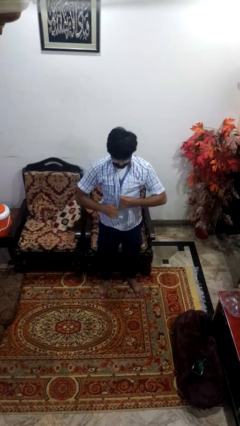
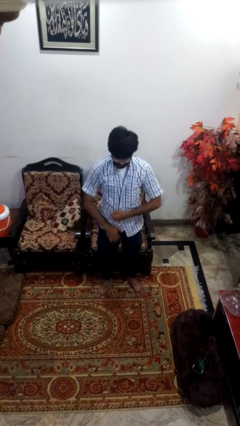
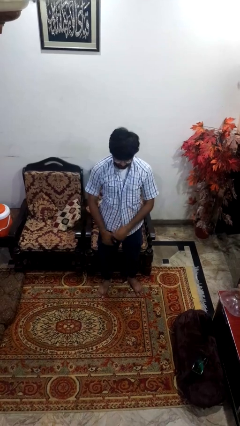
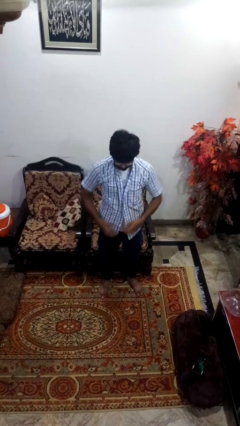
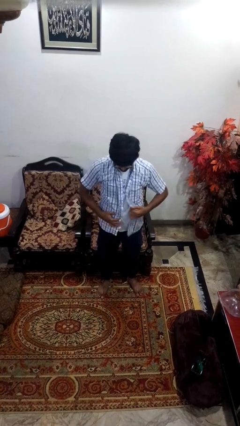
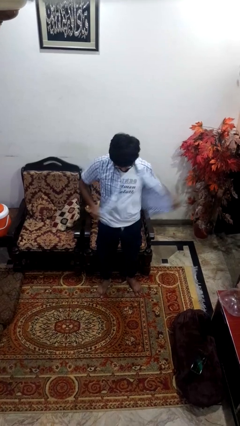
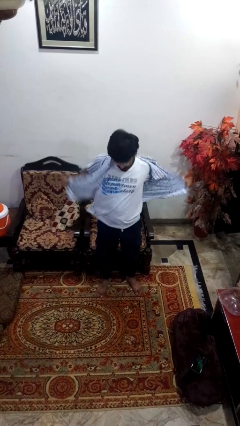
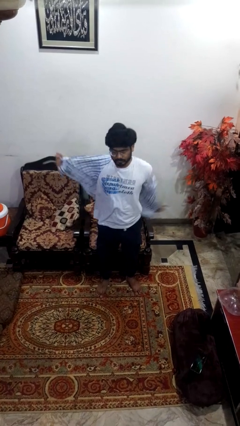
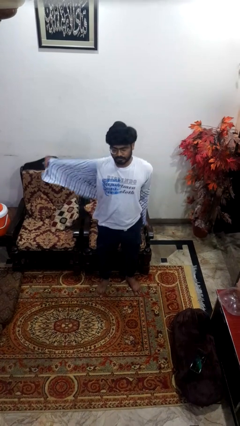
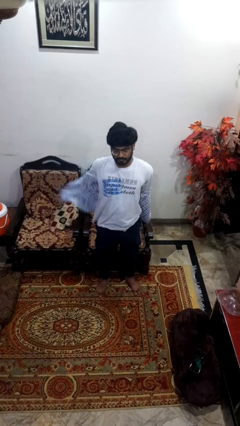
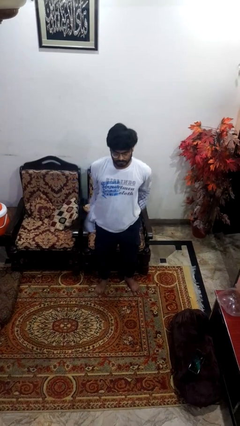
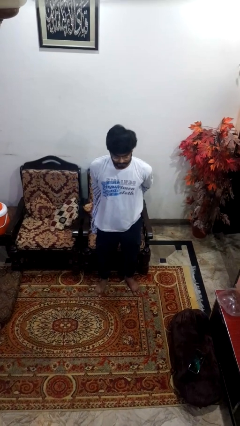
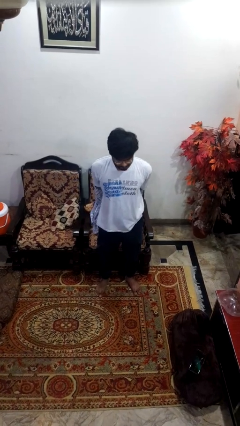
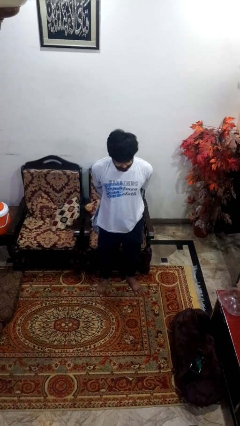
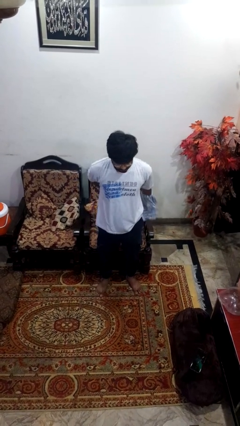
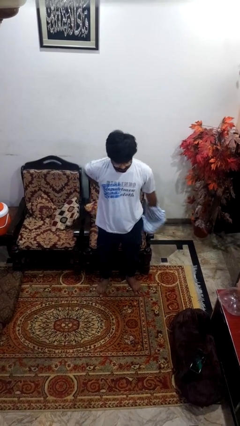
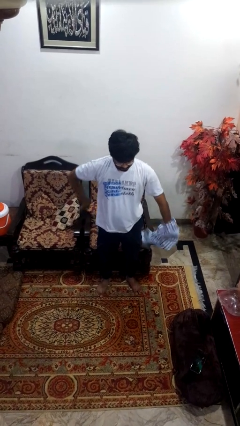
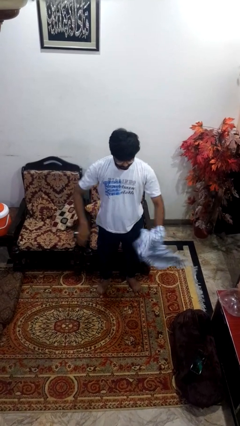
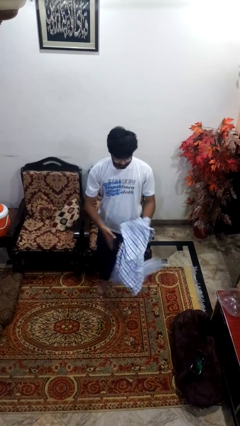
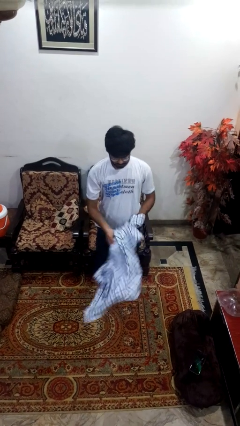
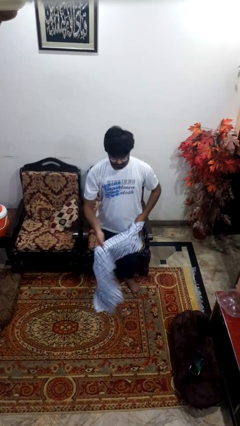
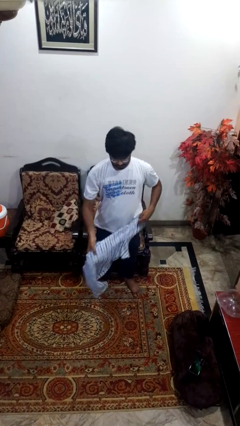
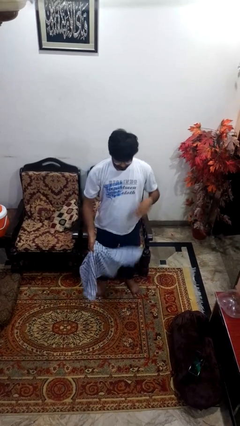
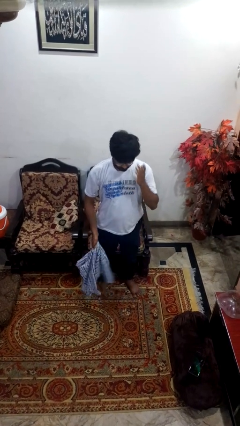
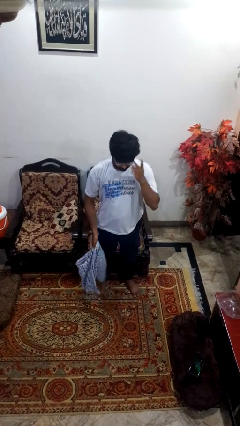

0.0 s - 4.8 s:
person takes off shirt

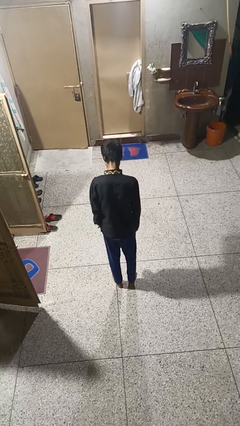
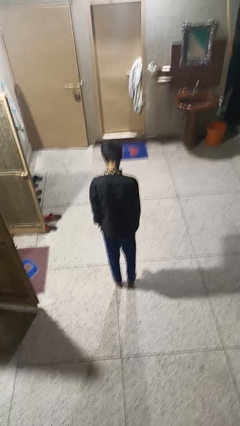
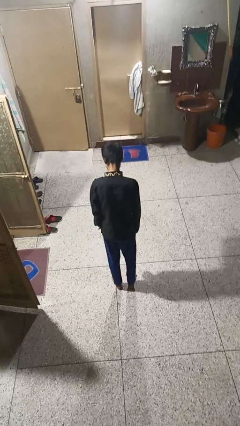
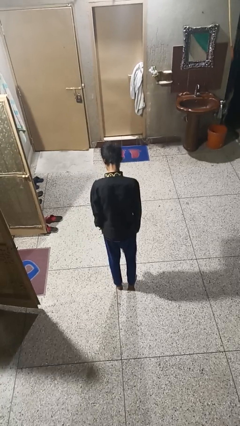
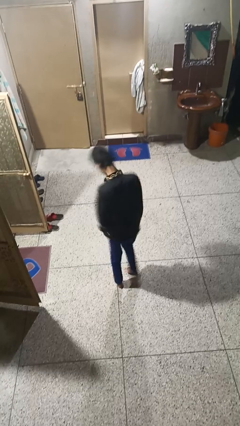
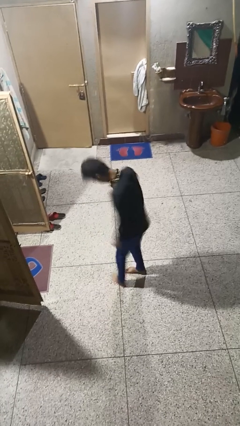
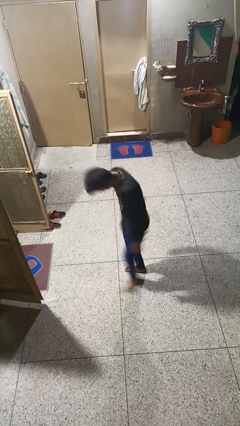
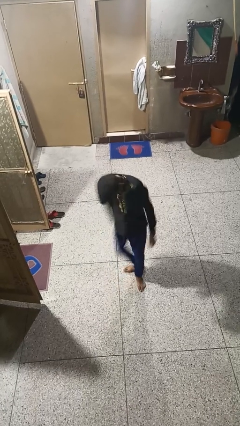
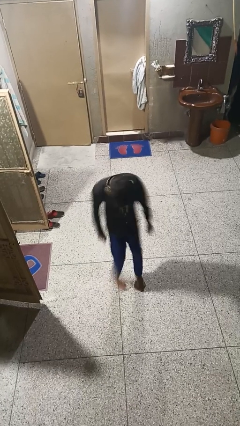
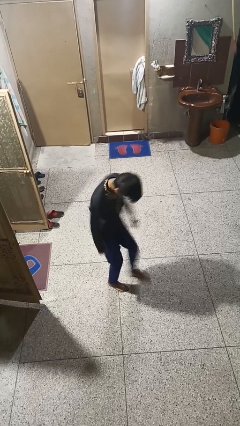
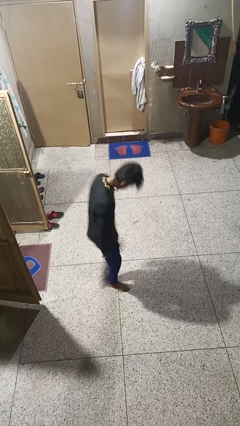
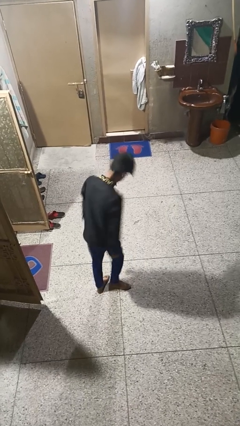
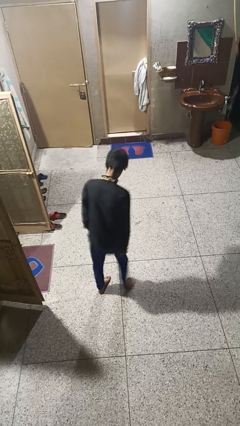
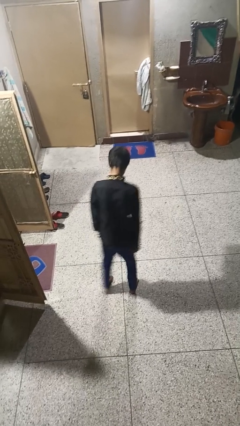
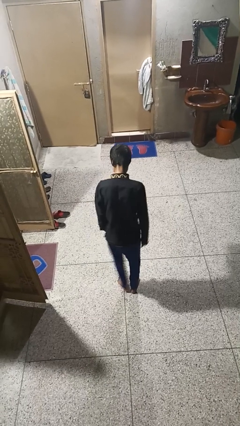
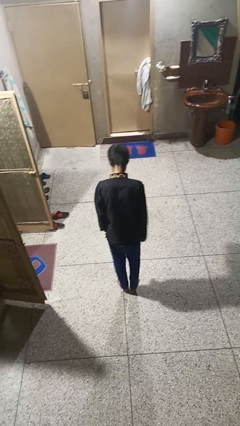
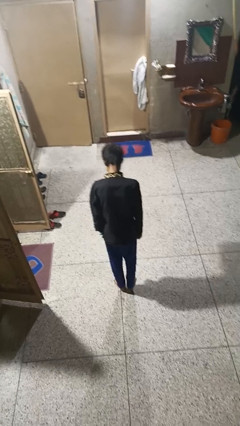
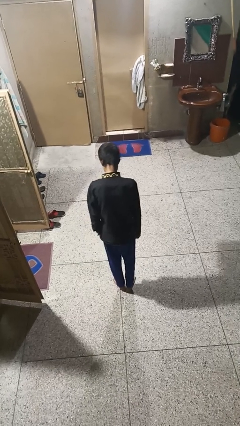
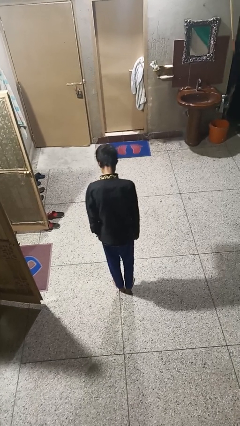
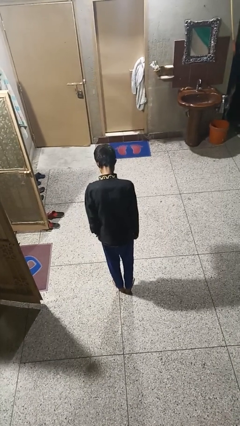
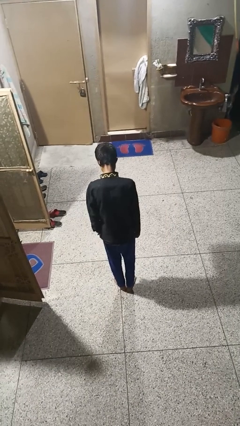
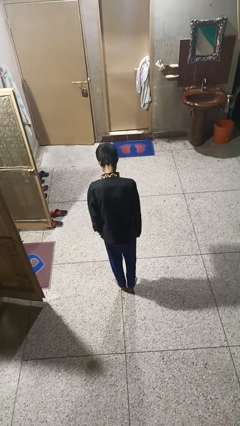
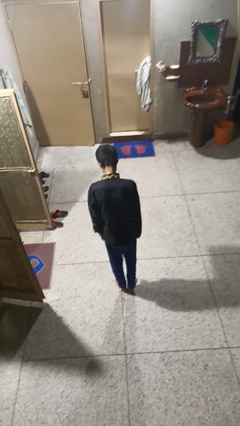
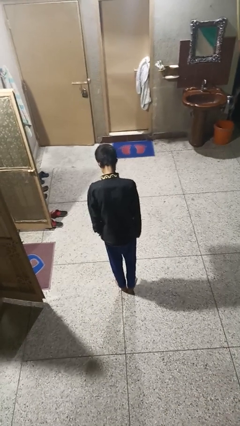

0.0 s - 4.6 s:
person twirls

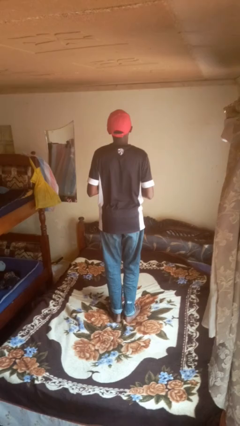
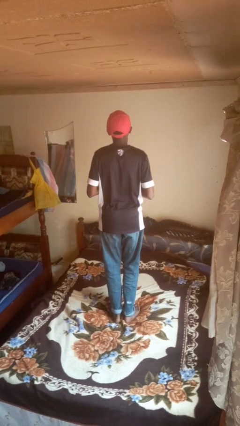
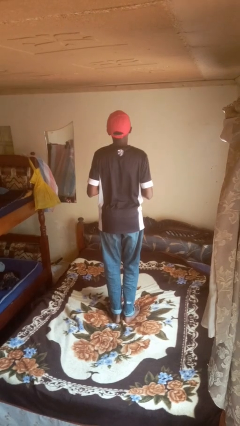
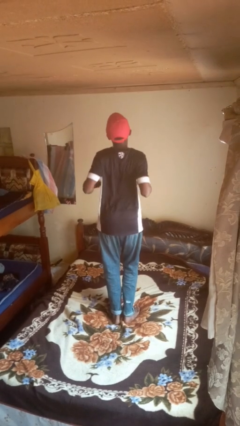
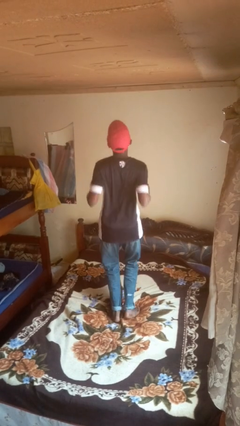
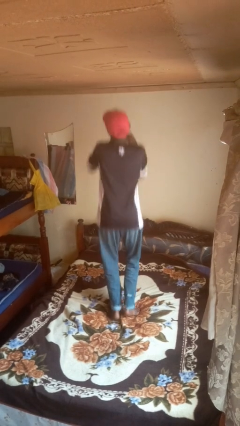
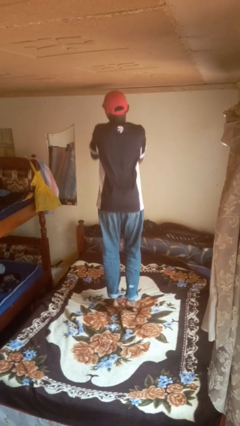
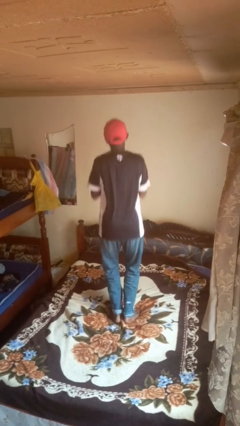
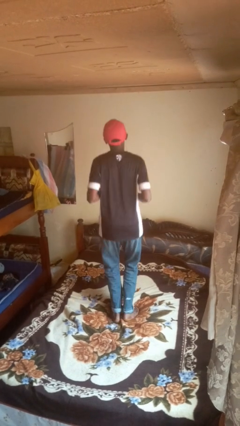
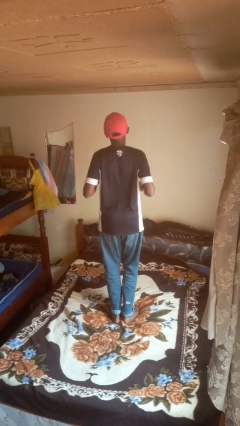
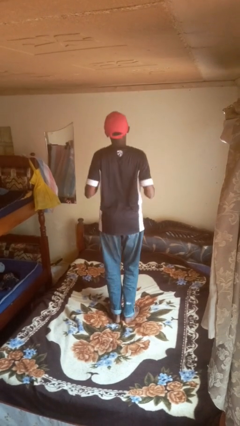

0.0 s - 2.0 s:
person jumps on bed

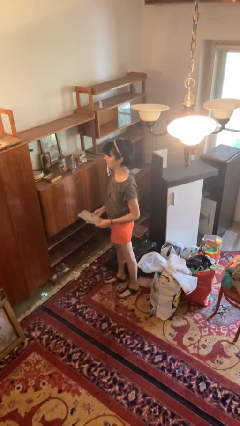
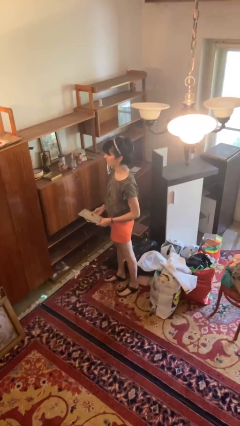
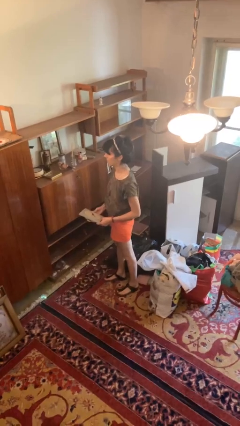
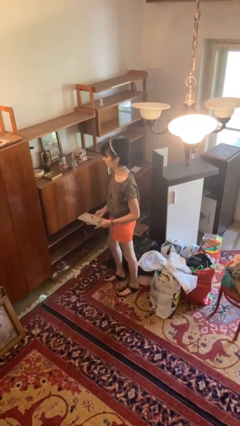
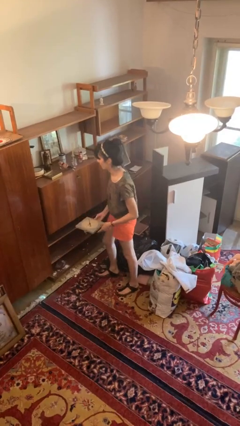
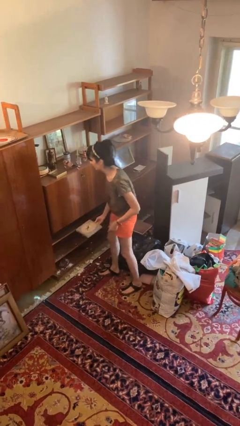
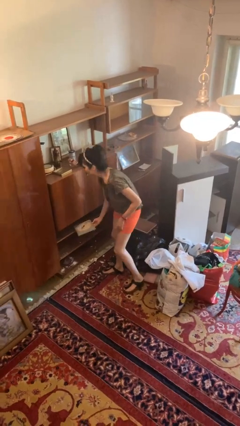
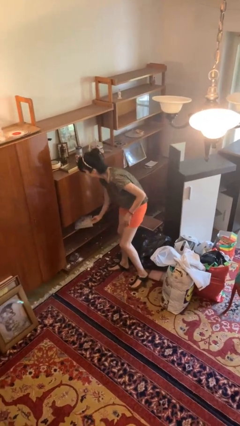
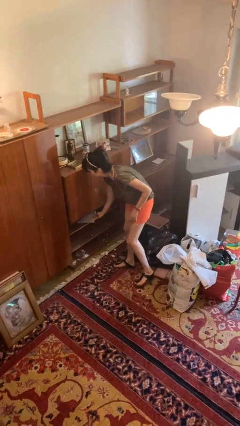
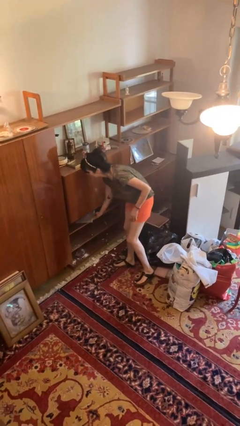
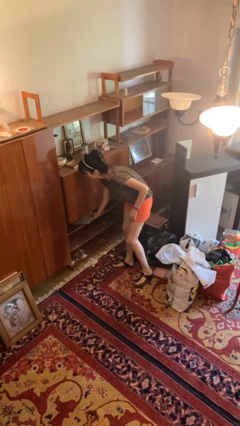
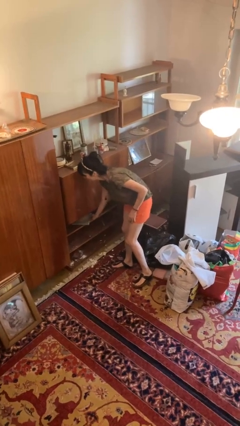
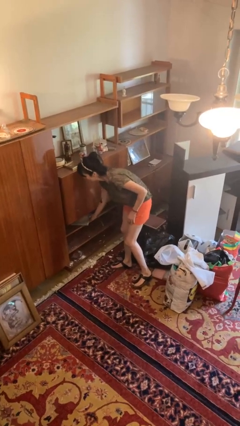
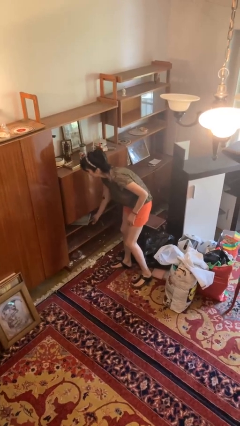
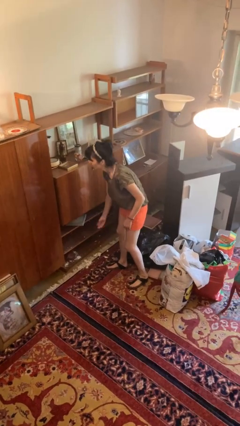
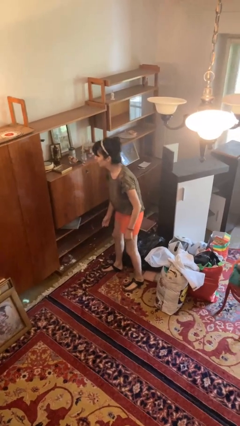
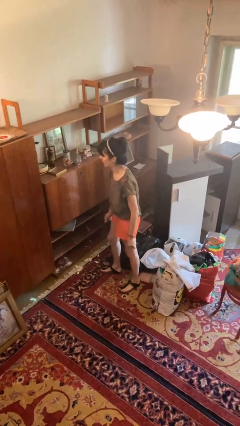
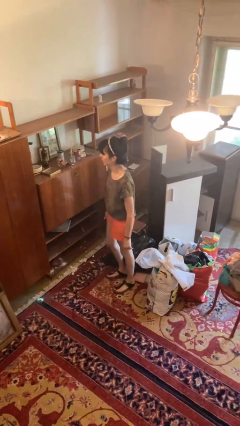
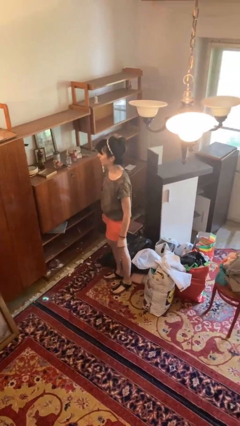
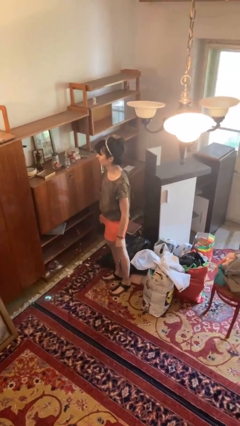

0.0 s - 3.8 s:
person puts down object into cabinet

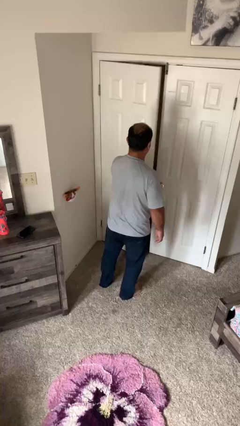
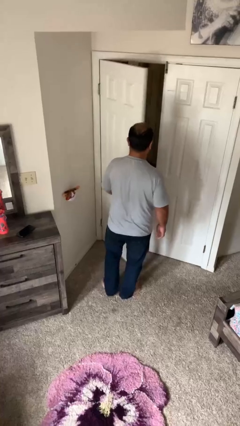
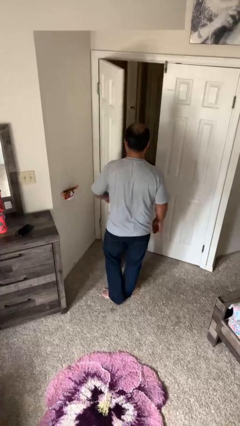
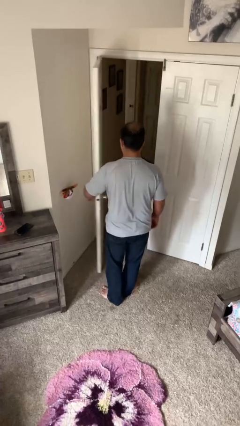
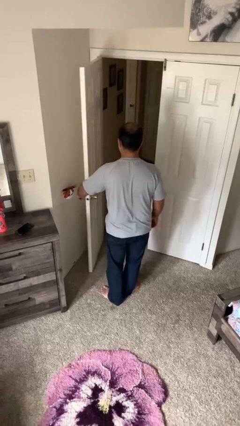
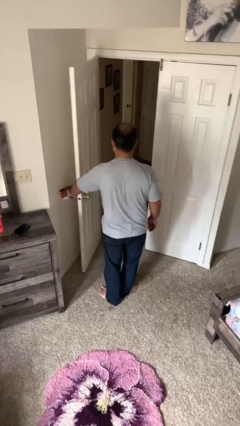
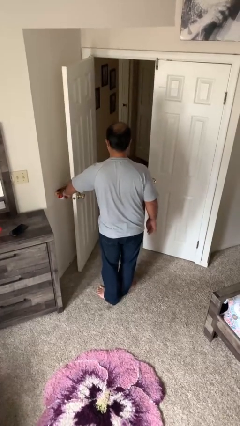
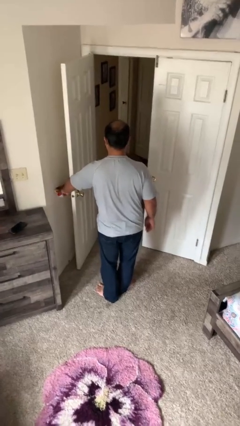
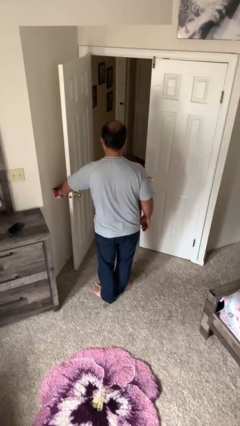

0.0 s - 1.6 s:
person opens facility door

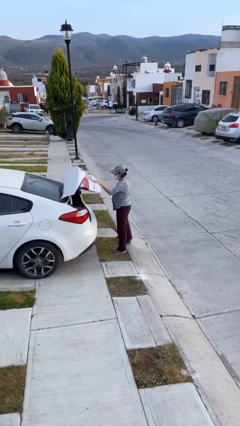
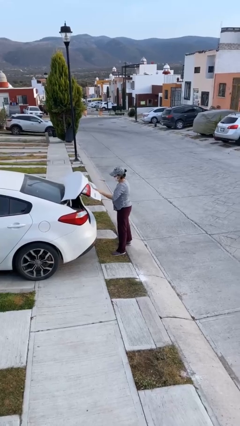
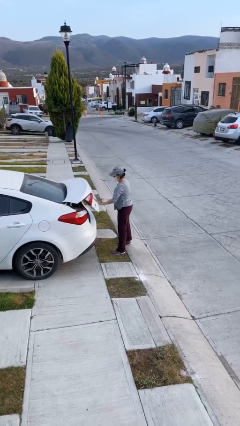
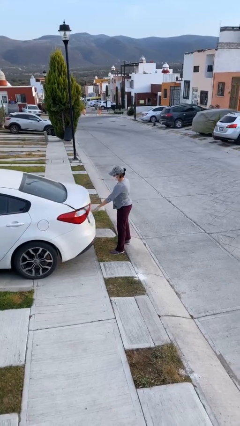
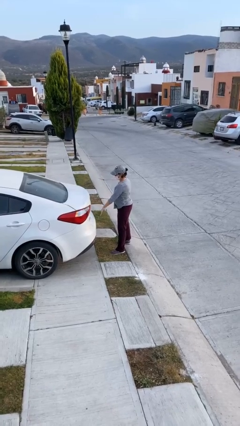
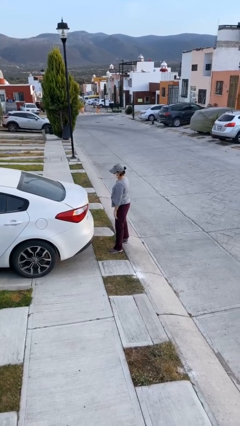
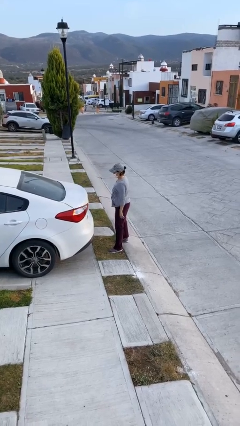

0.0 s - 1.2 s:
person closes car trunk
